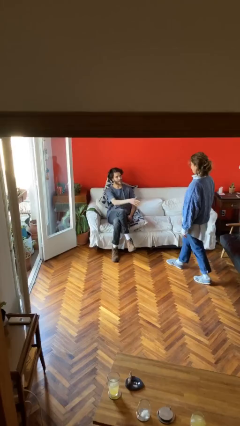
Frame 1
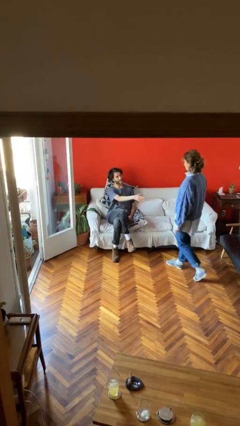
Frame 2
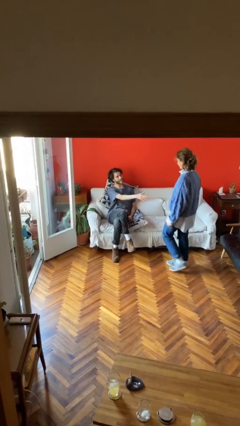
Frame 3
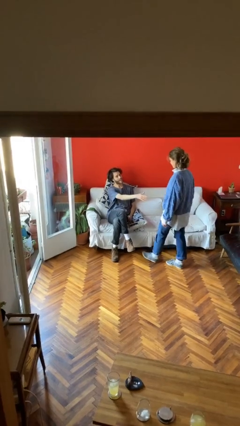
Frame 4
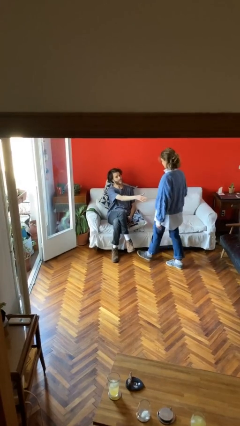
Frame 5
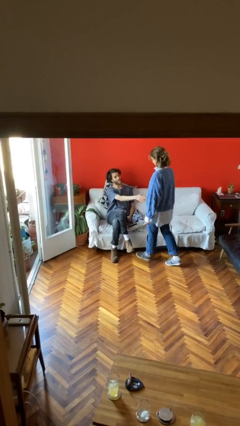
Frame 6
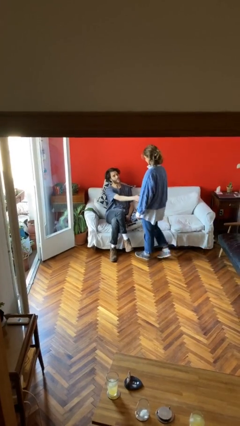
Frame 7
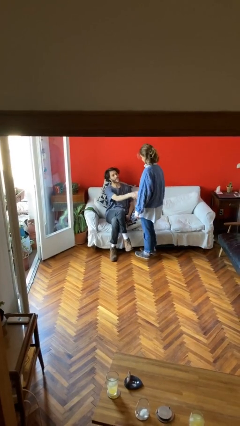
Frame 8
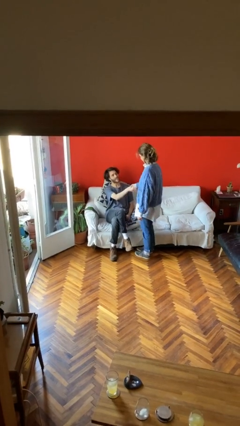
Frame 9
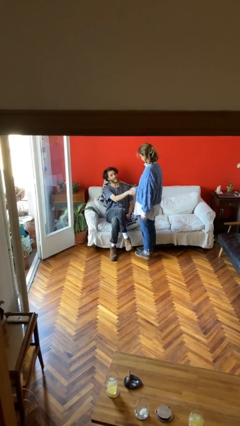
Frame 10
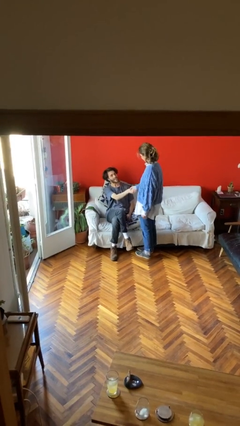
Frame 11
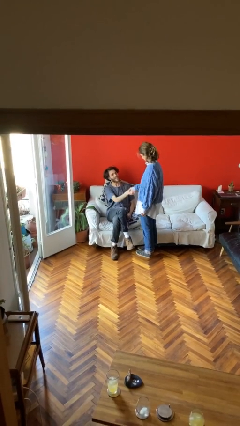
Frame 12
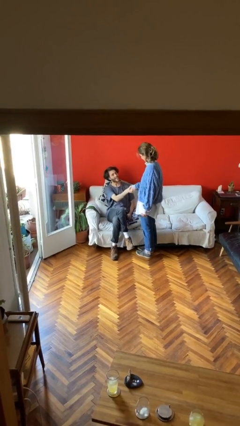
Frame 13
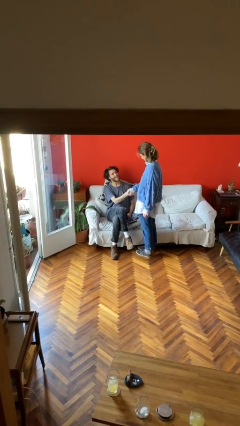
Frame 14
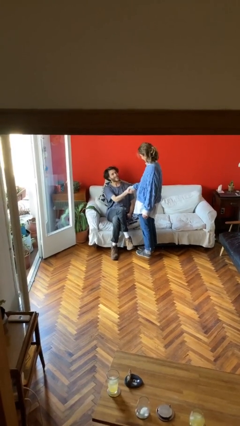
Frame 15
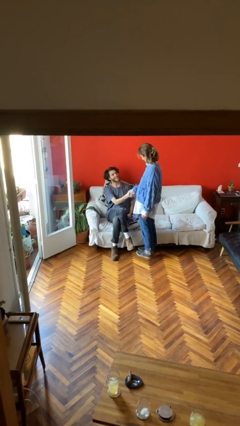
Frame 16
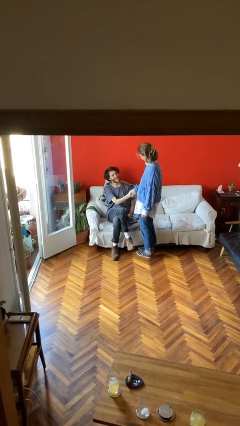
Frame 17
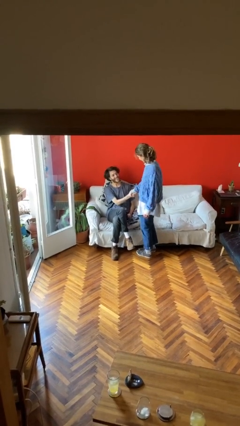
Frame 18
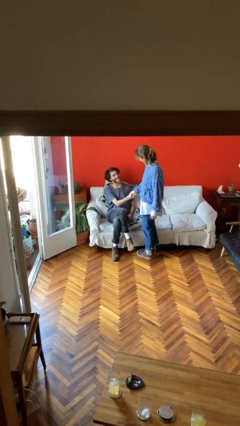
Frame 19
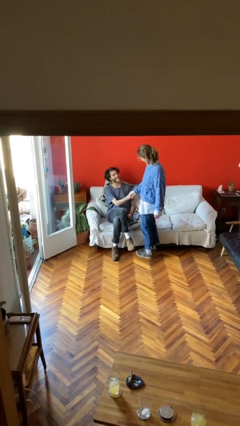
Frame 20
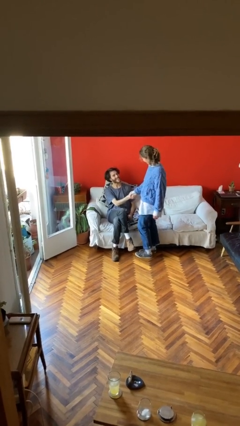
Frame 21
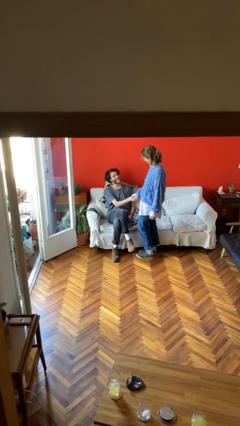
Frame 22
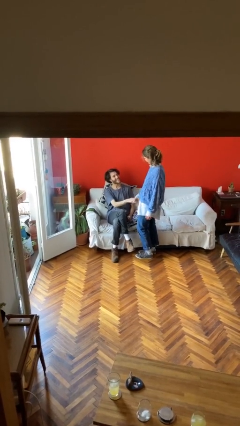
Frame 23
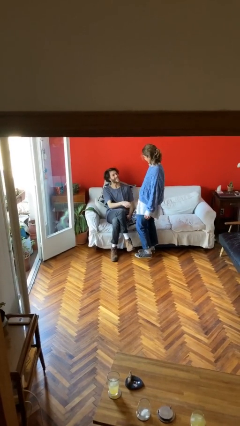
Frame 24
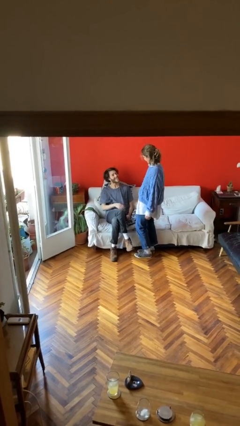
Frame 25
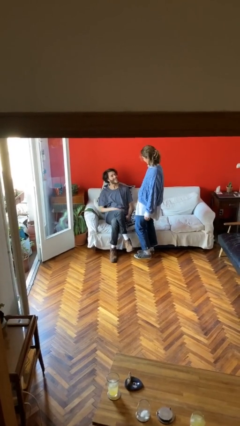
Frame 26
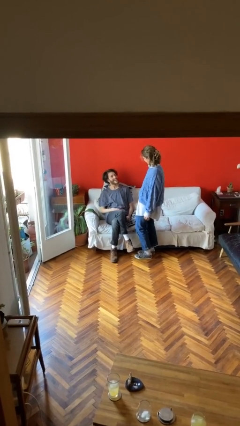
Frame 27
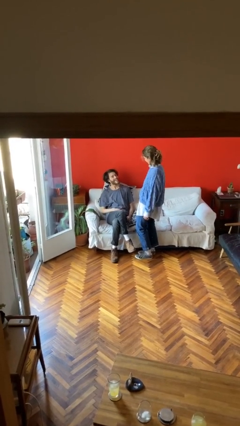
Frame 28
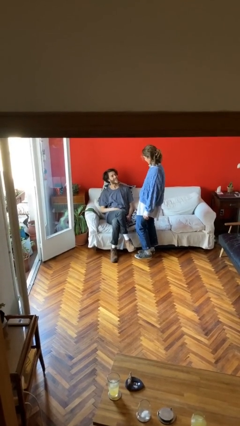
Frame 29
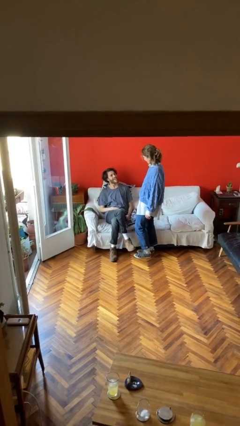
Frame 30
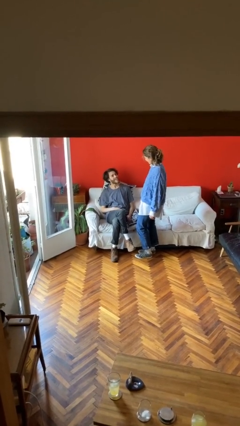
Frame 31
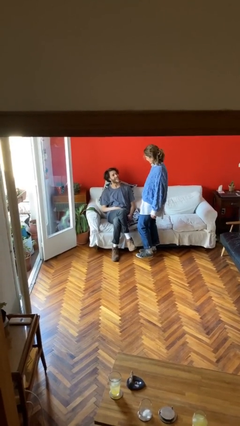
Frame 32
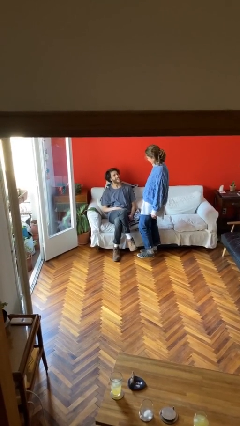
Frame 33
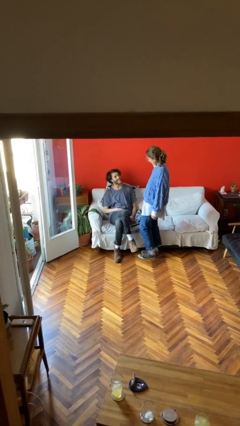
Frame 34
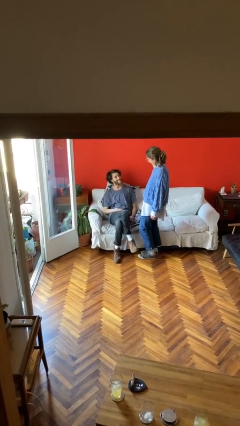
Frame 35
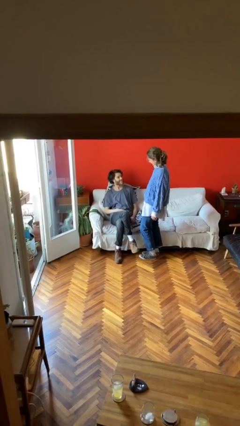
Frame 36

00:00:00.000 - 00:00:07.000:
person shakes hand

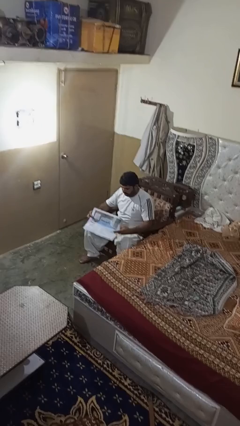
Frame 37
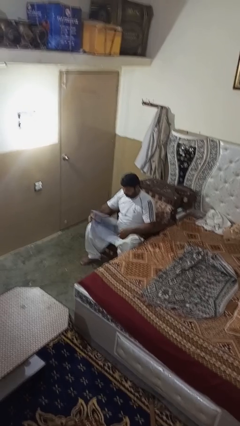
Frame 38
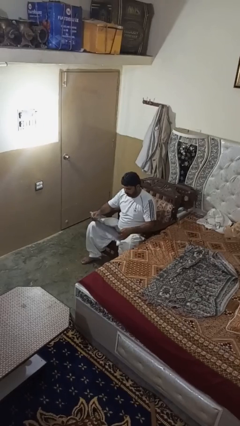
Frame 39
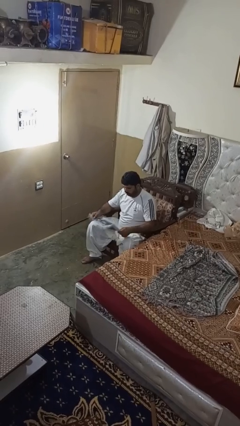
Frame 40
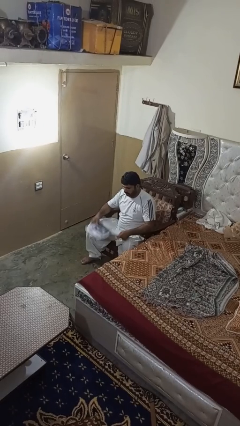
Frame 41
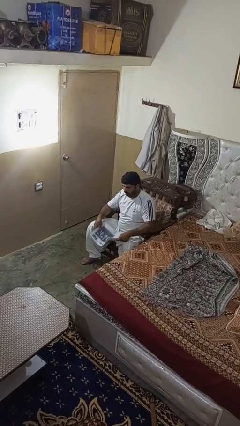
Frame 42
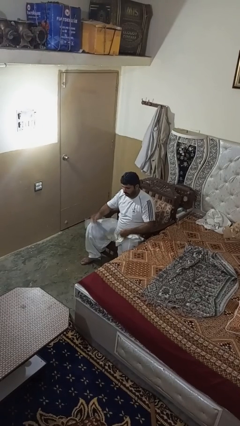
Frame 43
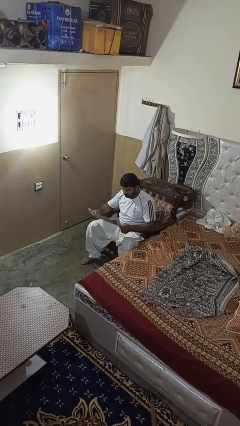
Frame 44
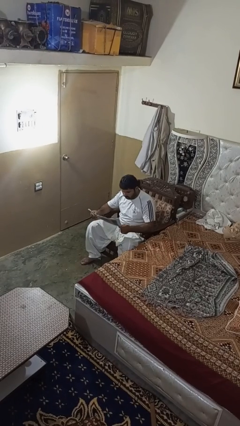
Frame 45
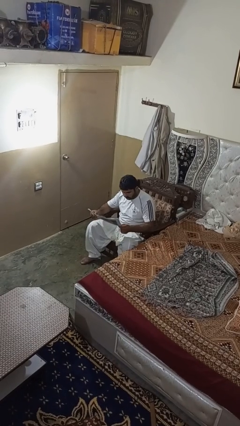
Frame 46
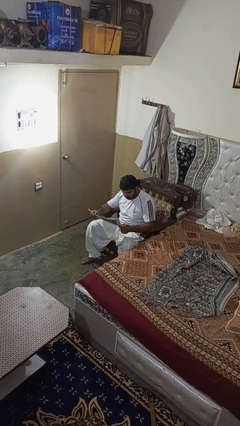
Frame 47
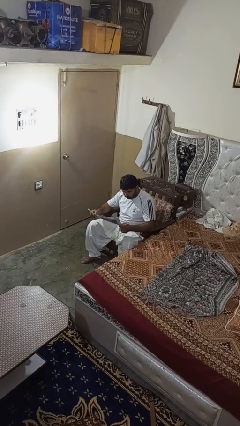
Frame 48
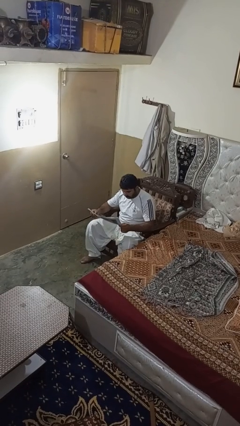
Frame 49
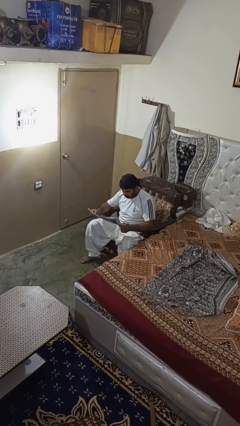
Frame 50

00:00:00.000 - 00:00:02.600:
person reads newspaper

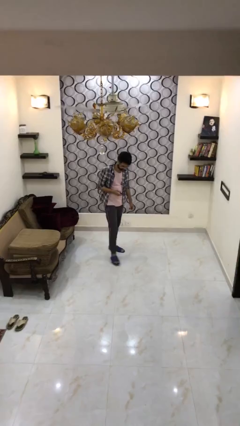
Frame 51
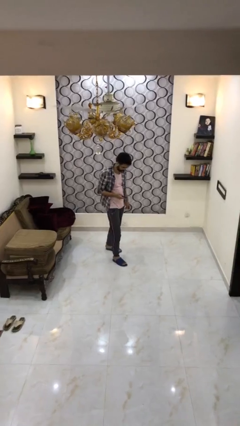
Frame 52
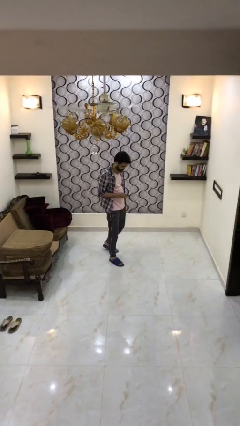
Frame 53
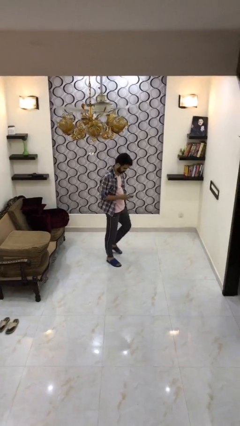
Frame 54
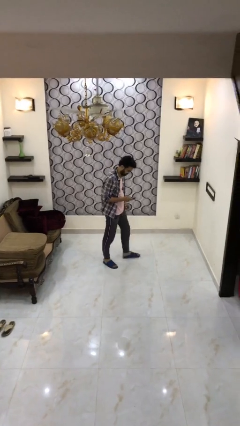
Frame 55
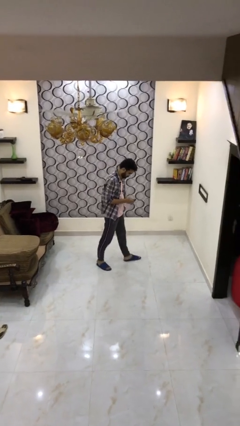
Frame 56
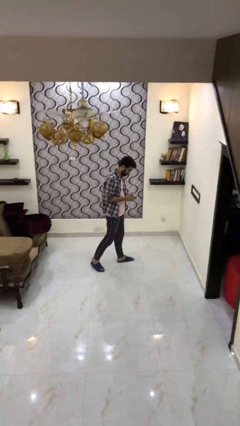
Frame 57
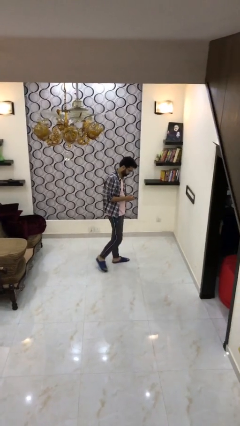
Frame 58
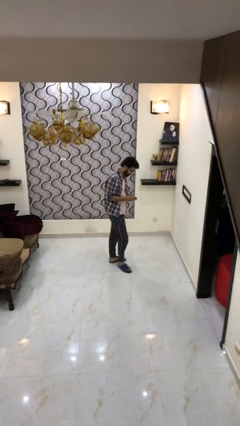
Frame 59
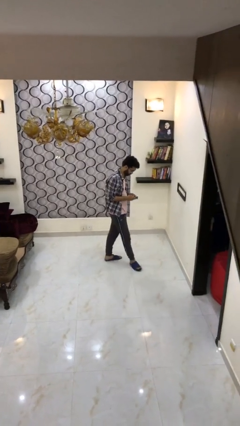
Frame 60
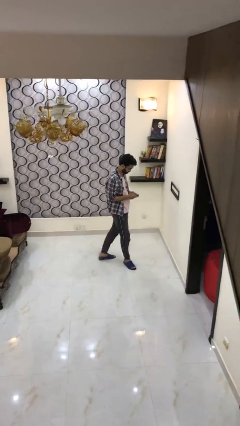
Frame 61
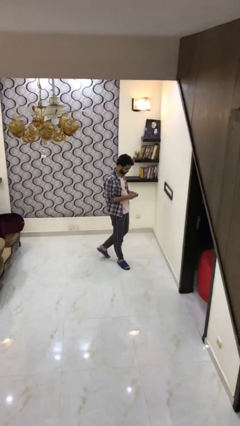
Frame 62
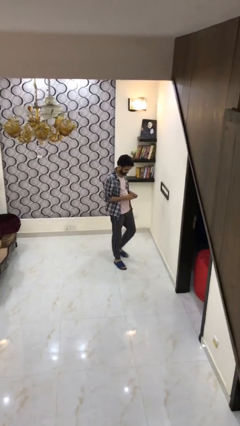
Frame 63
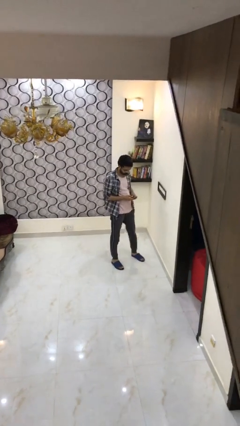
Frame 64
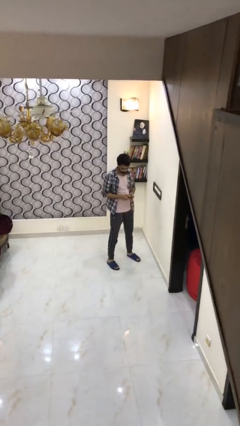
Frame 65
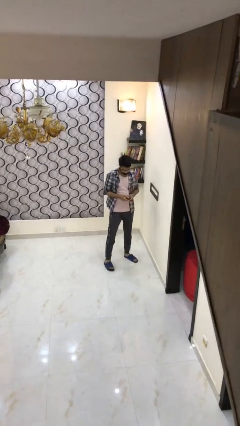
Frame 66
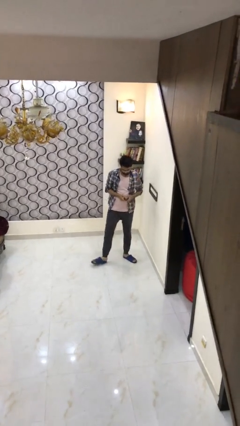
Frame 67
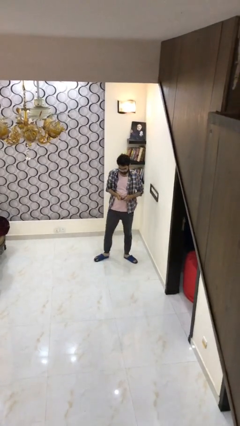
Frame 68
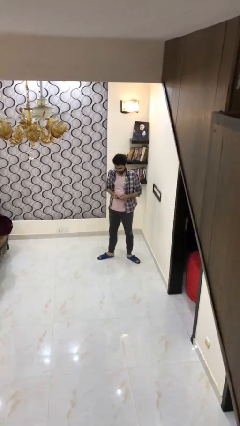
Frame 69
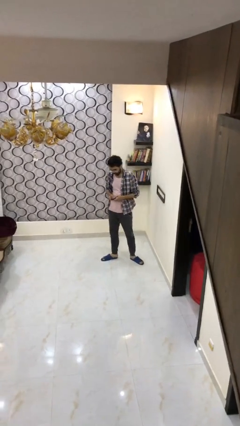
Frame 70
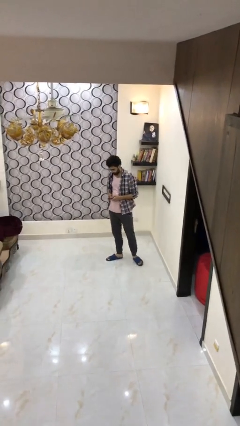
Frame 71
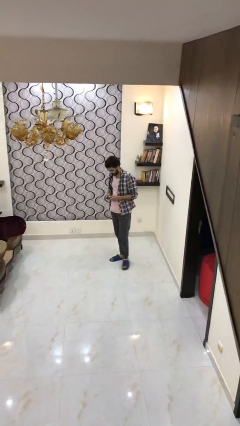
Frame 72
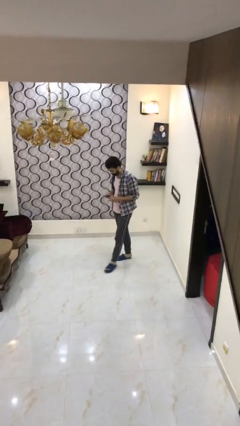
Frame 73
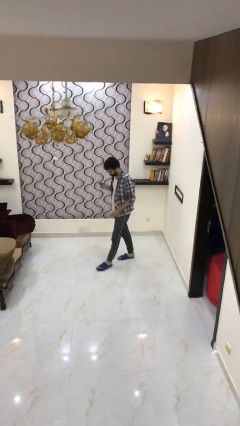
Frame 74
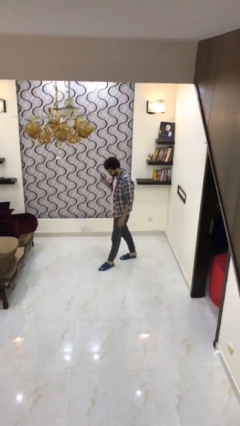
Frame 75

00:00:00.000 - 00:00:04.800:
person texts on phone

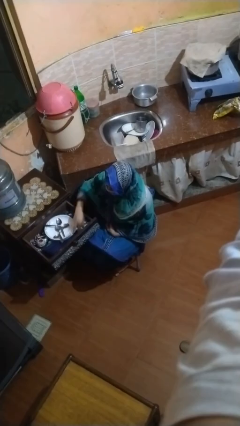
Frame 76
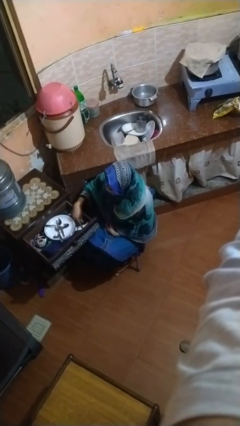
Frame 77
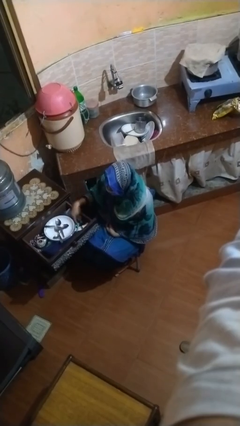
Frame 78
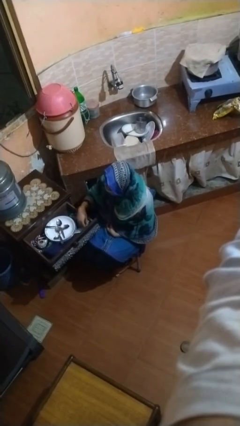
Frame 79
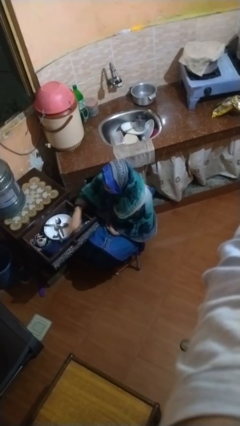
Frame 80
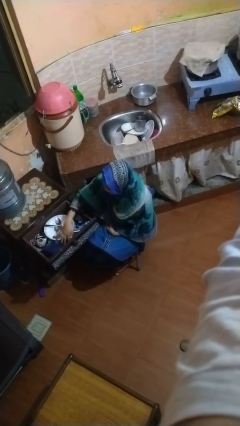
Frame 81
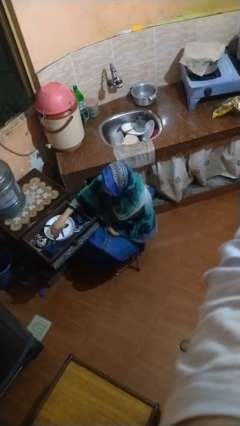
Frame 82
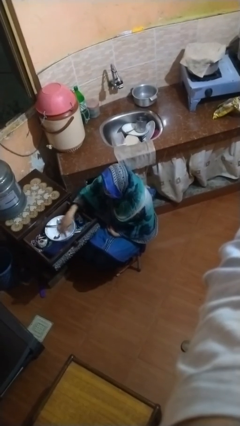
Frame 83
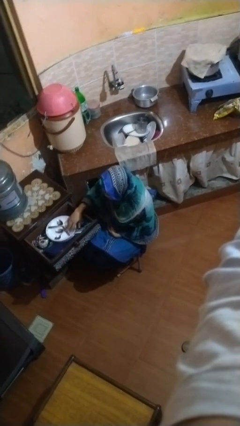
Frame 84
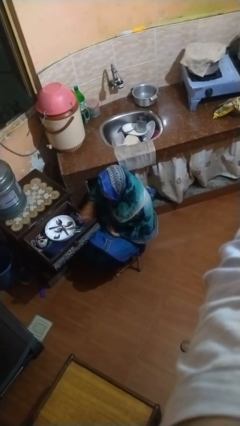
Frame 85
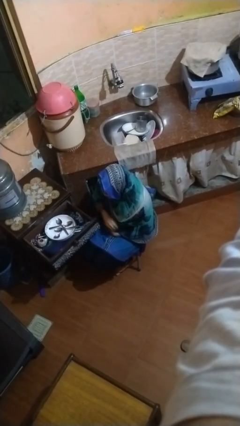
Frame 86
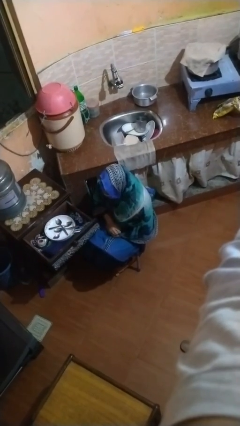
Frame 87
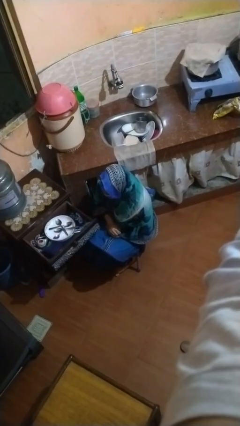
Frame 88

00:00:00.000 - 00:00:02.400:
person searches in kitchen drawer

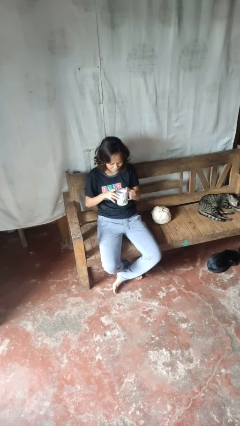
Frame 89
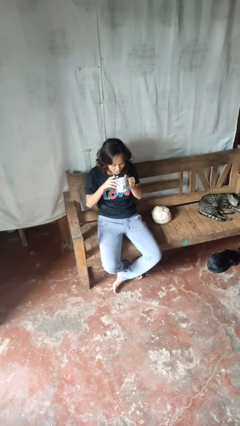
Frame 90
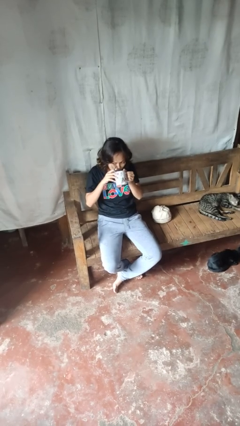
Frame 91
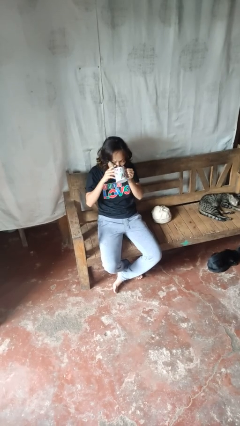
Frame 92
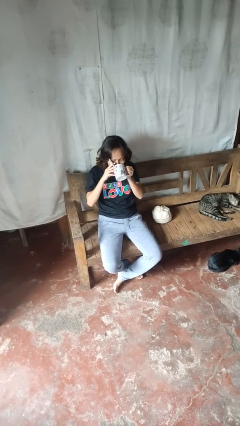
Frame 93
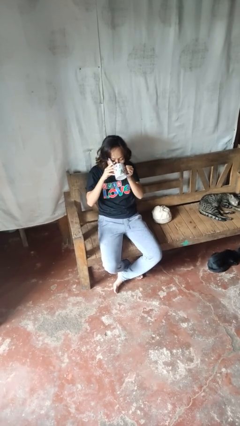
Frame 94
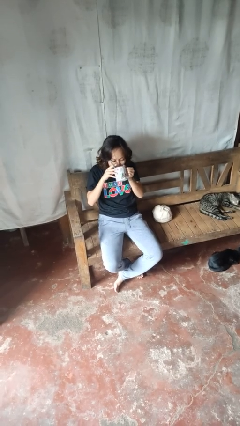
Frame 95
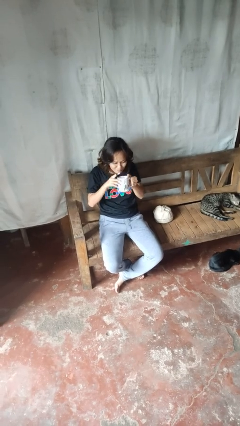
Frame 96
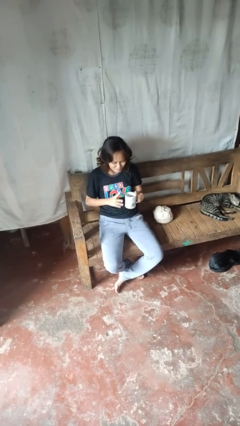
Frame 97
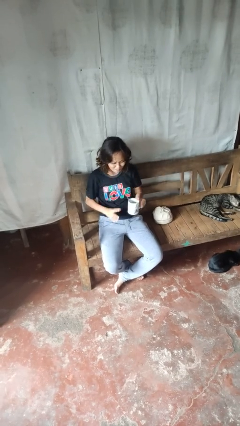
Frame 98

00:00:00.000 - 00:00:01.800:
person drinks from mug
